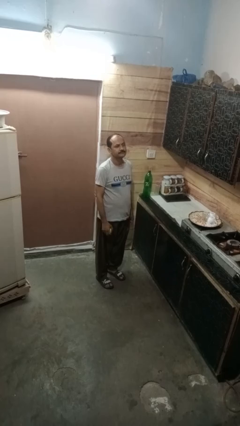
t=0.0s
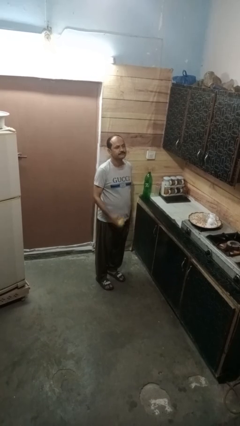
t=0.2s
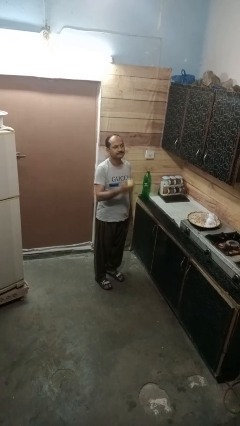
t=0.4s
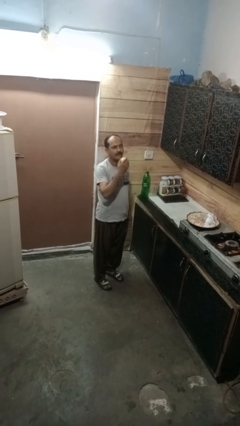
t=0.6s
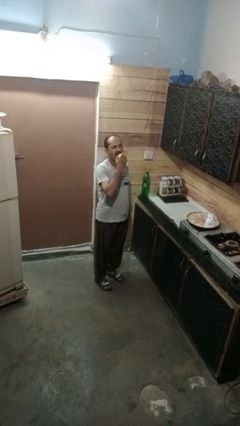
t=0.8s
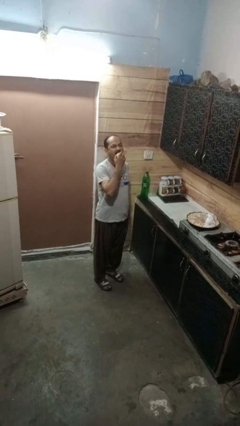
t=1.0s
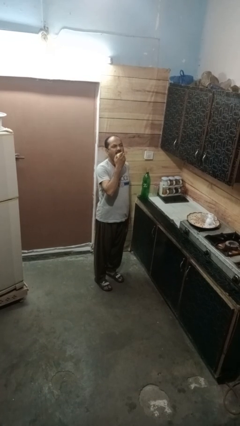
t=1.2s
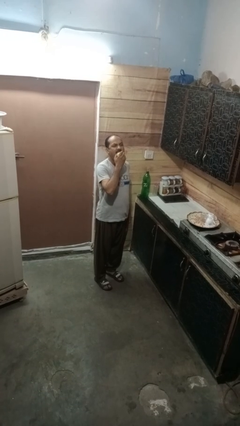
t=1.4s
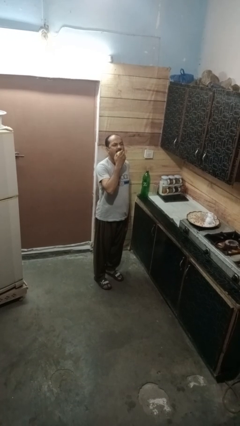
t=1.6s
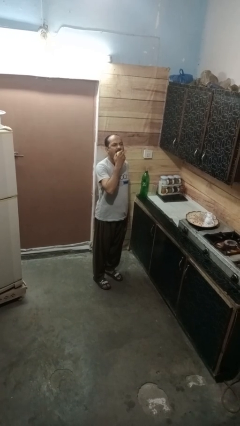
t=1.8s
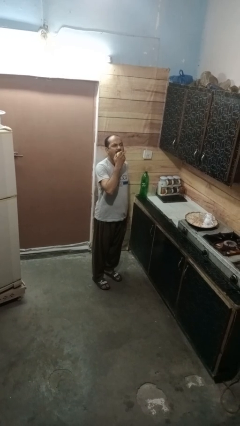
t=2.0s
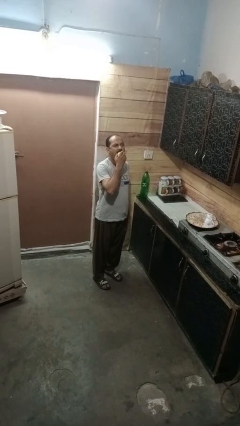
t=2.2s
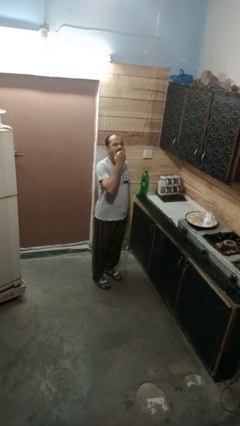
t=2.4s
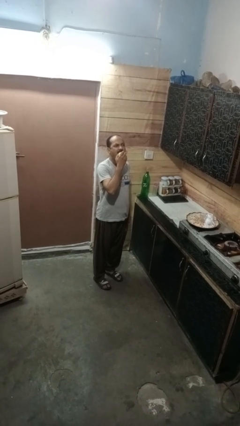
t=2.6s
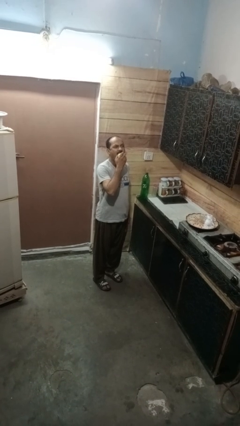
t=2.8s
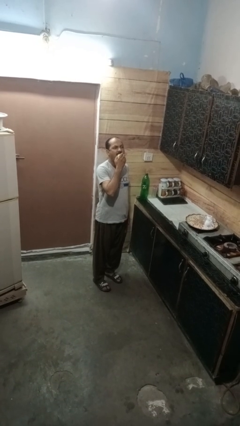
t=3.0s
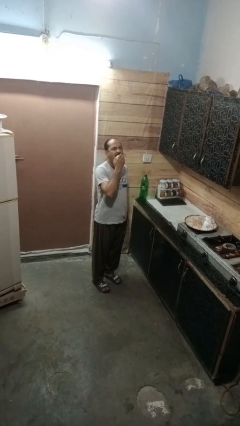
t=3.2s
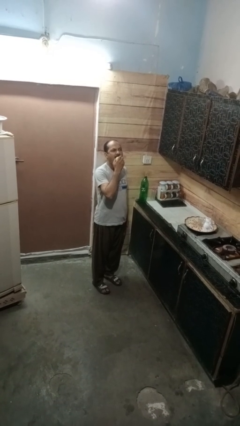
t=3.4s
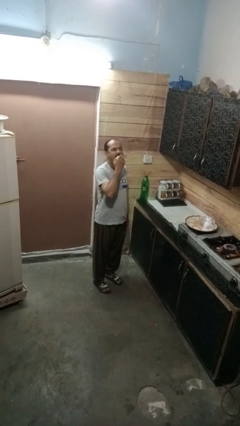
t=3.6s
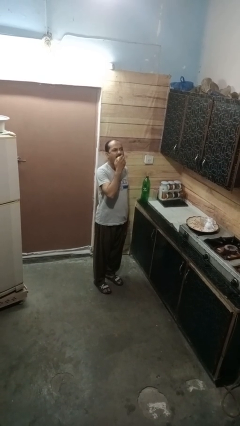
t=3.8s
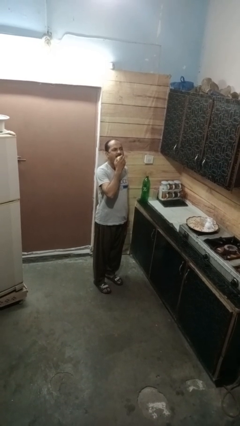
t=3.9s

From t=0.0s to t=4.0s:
person eats apple

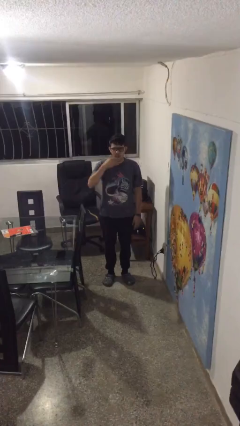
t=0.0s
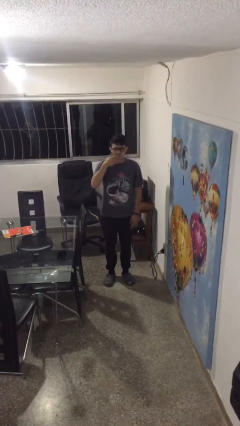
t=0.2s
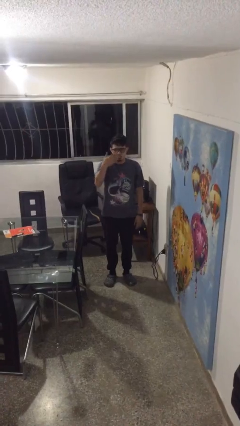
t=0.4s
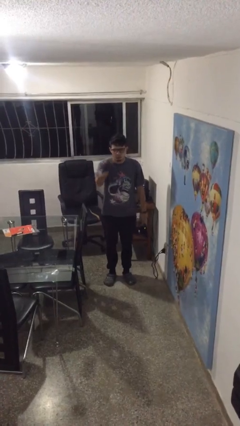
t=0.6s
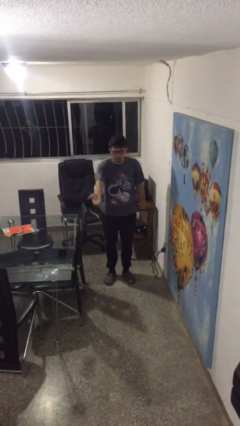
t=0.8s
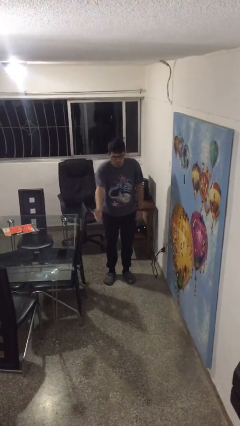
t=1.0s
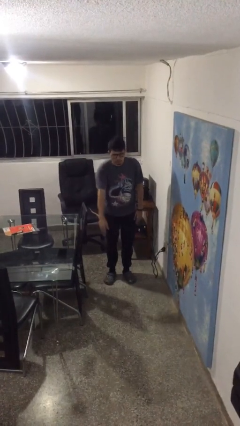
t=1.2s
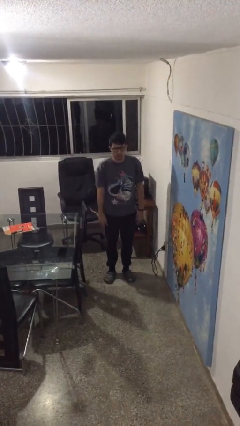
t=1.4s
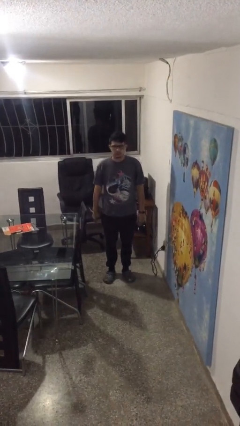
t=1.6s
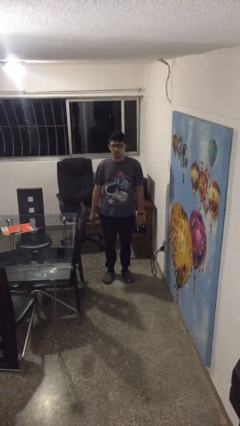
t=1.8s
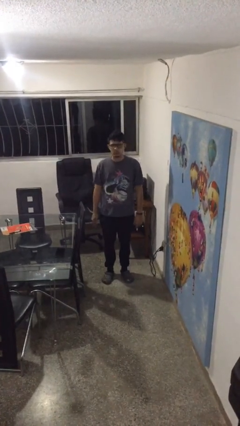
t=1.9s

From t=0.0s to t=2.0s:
person gestures blow kiss

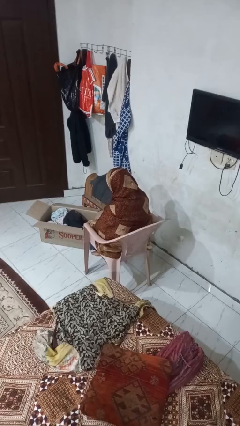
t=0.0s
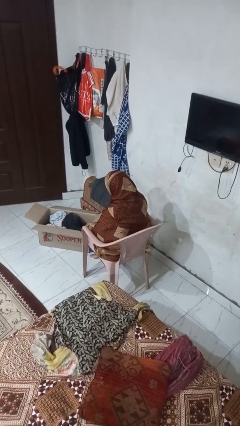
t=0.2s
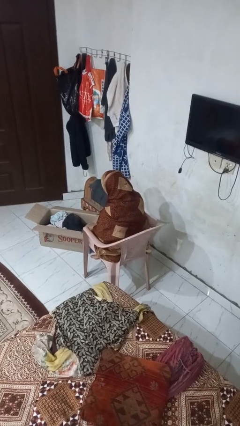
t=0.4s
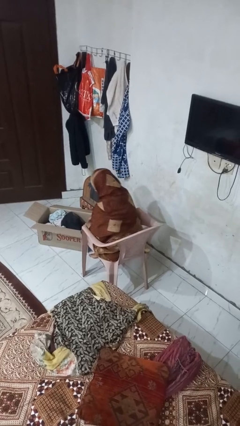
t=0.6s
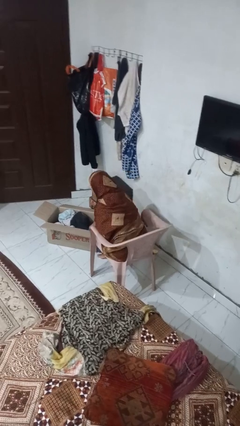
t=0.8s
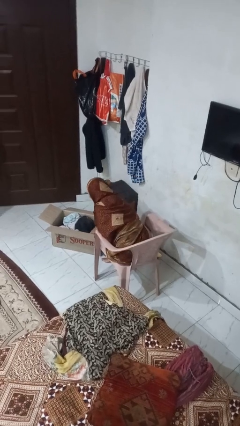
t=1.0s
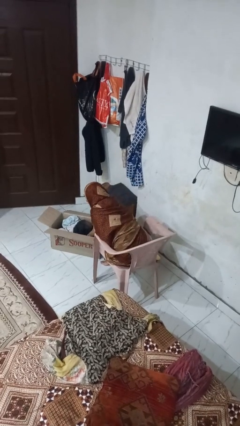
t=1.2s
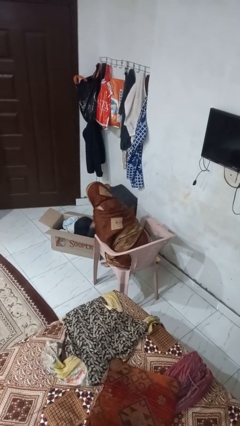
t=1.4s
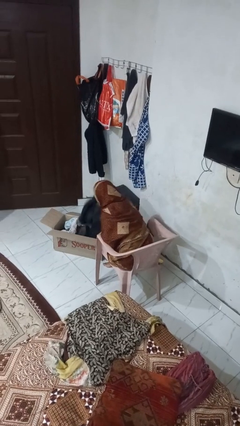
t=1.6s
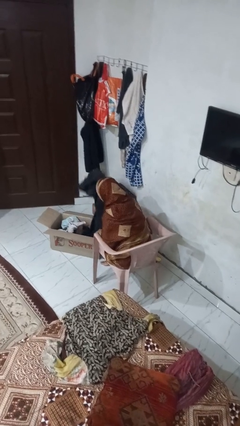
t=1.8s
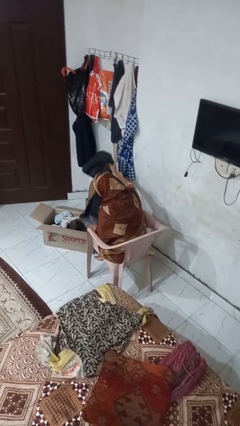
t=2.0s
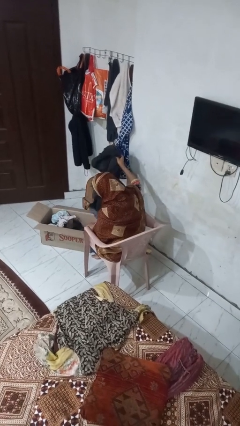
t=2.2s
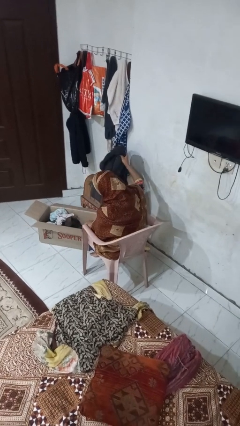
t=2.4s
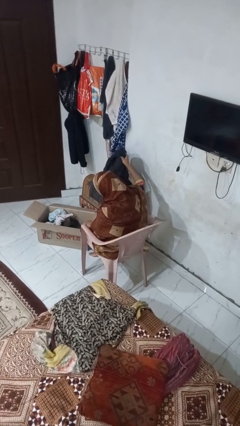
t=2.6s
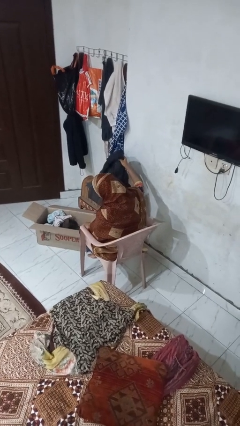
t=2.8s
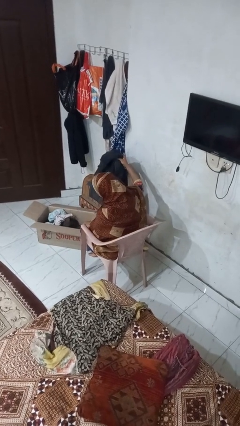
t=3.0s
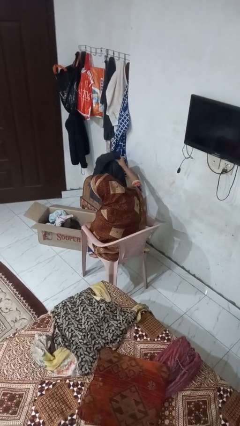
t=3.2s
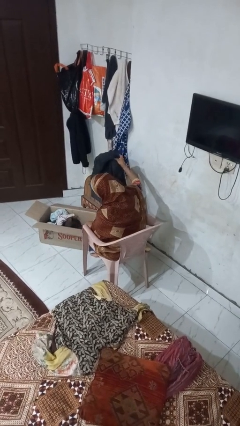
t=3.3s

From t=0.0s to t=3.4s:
person takes object from box

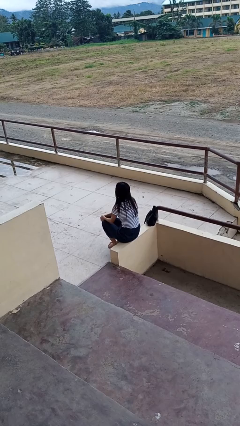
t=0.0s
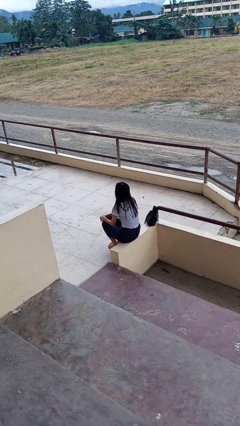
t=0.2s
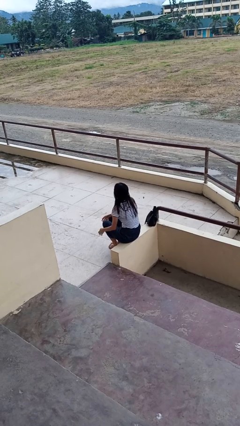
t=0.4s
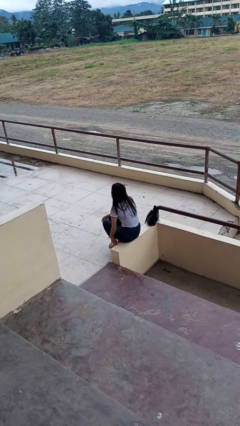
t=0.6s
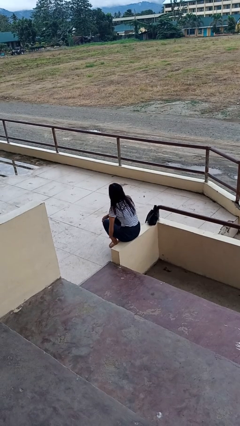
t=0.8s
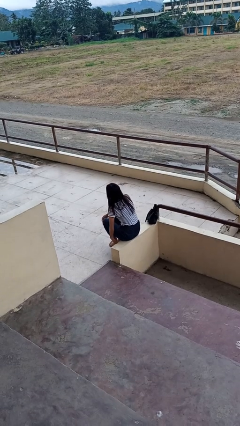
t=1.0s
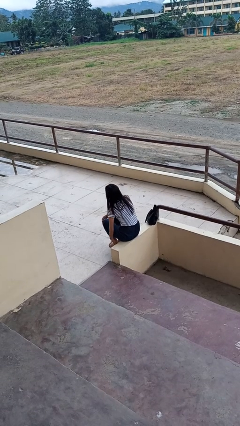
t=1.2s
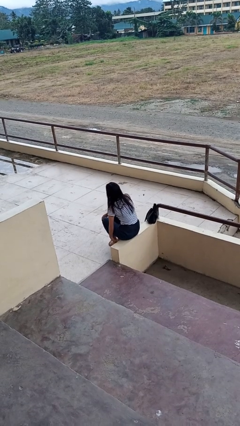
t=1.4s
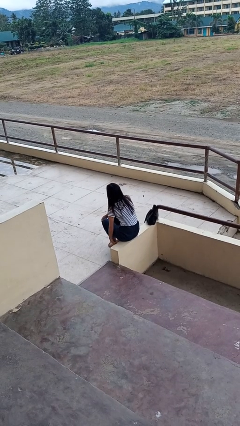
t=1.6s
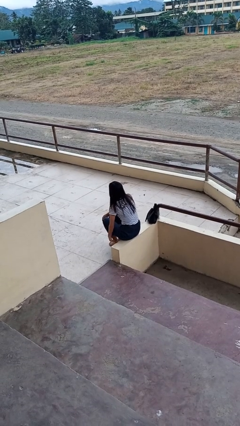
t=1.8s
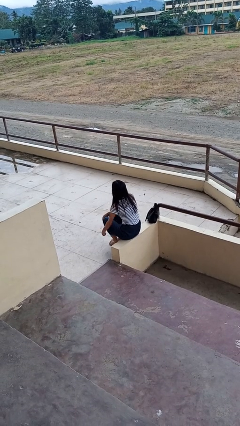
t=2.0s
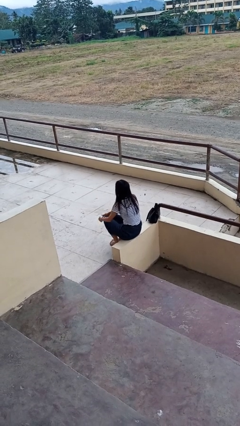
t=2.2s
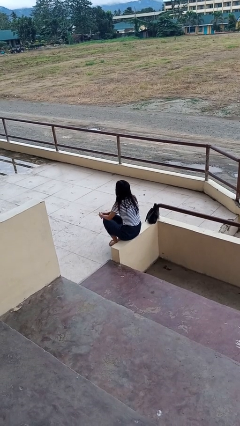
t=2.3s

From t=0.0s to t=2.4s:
person rubs foot

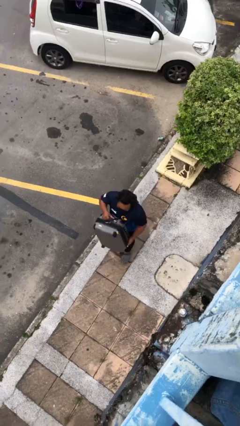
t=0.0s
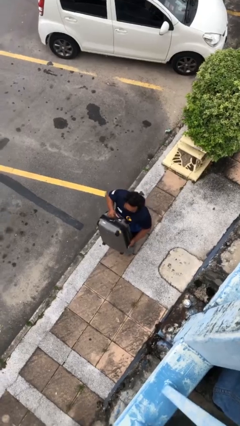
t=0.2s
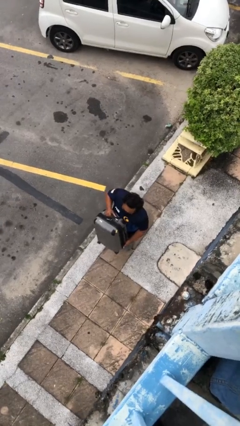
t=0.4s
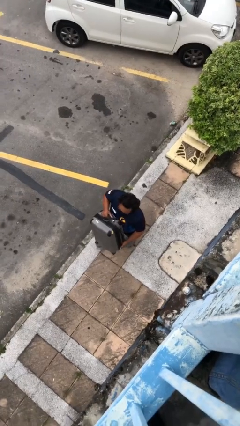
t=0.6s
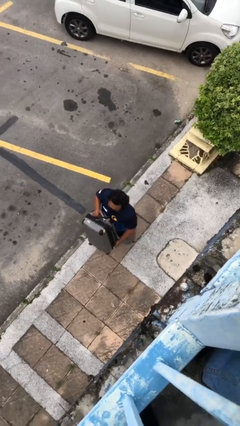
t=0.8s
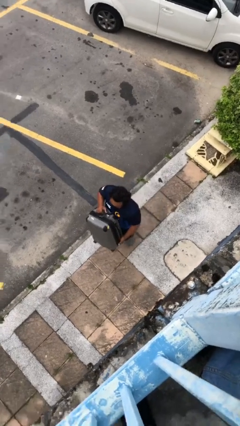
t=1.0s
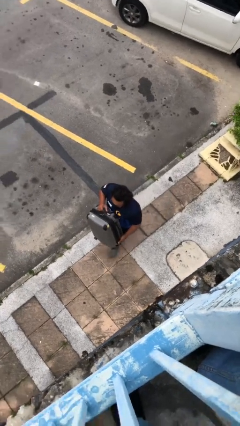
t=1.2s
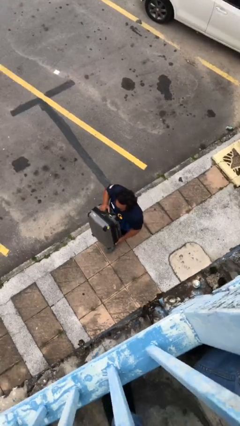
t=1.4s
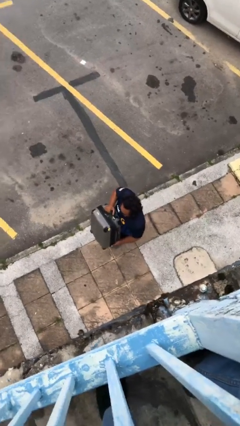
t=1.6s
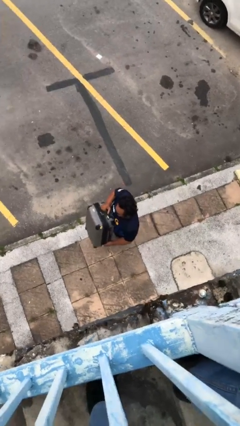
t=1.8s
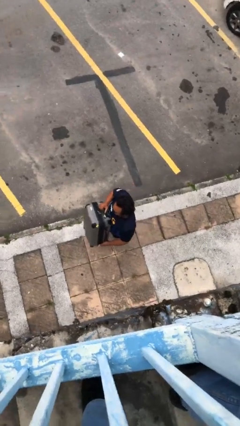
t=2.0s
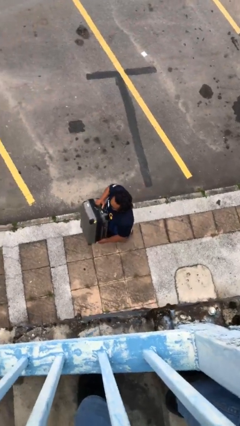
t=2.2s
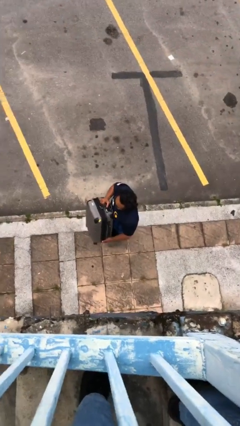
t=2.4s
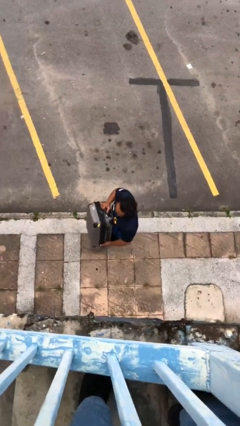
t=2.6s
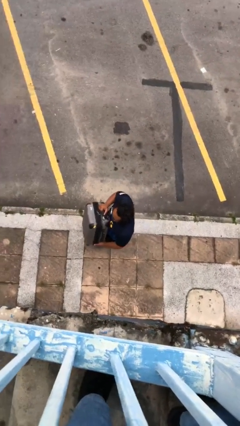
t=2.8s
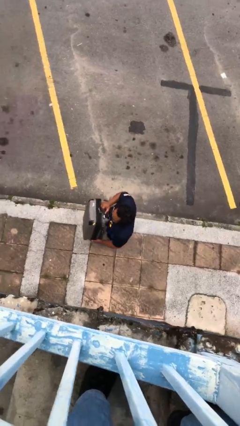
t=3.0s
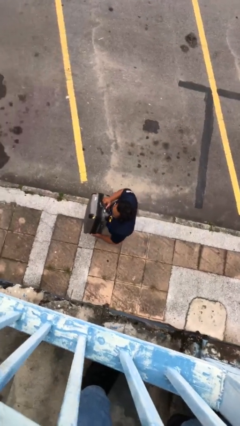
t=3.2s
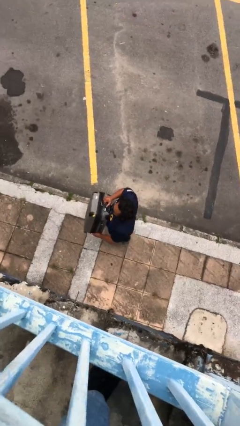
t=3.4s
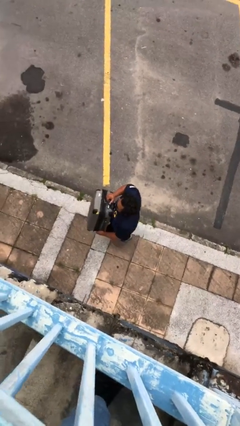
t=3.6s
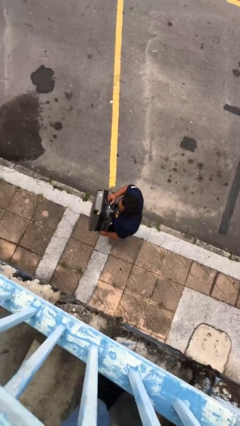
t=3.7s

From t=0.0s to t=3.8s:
person carries heavy object

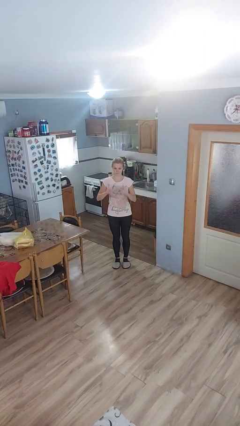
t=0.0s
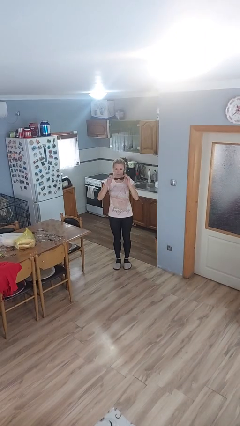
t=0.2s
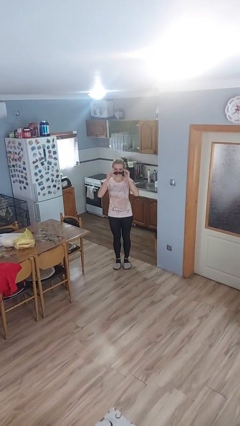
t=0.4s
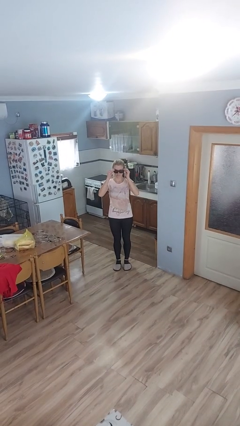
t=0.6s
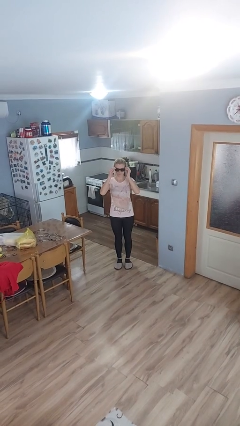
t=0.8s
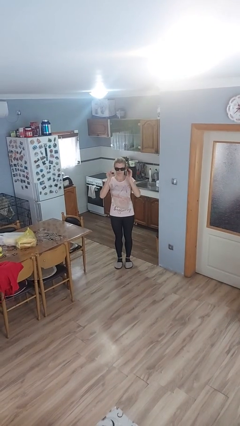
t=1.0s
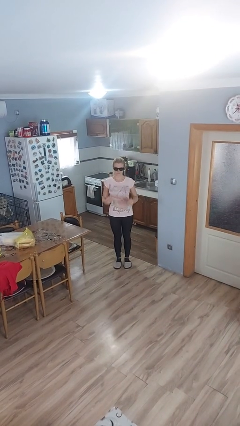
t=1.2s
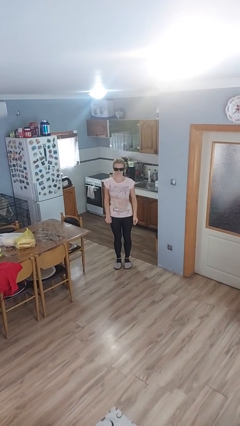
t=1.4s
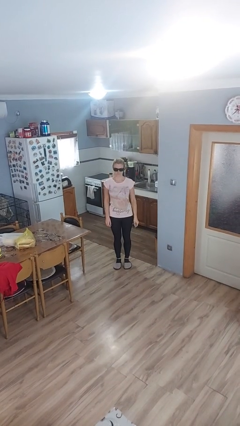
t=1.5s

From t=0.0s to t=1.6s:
person puts on sunglasses

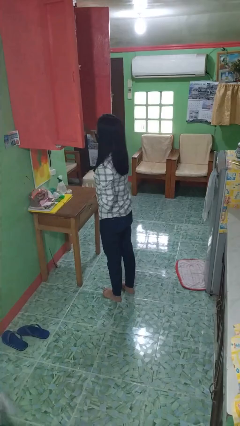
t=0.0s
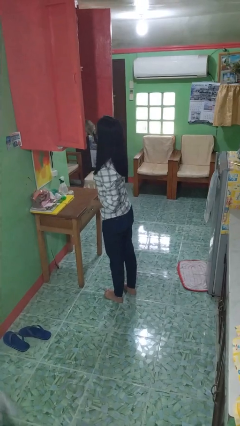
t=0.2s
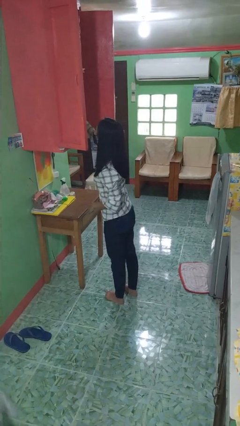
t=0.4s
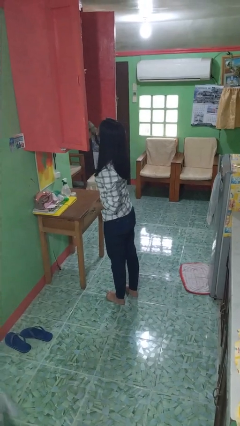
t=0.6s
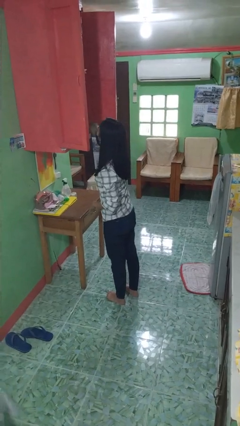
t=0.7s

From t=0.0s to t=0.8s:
person picks up object from cabinet
